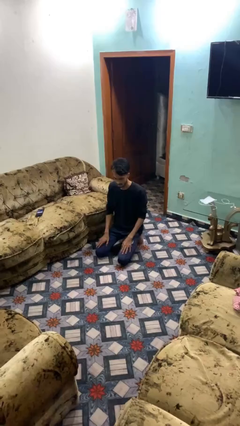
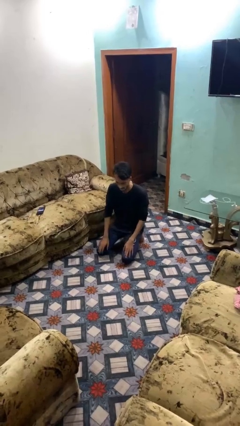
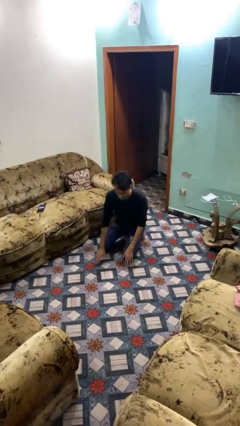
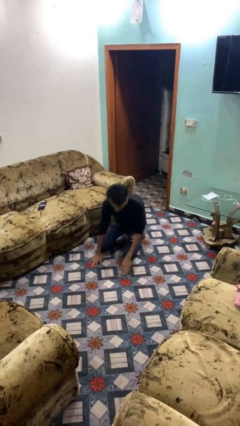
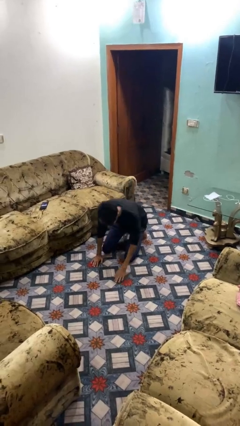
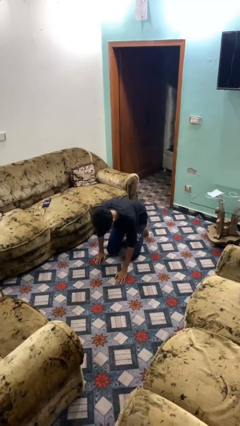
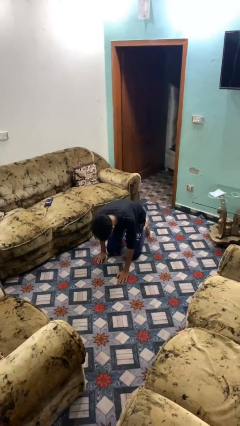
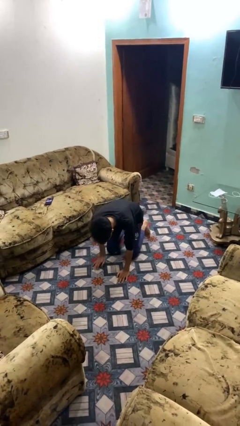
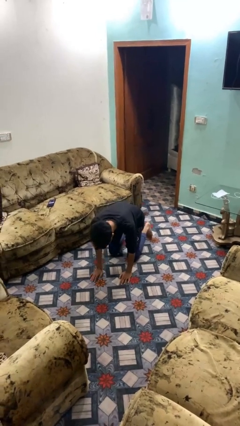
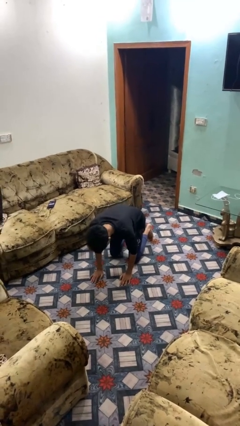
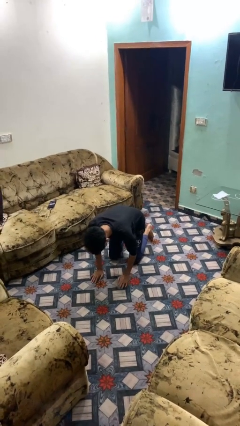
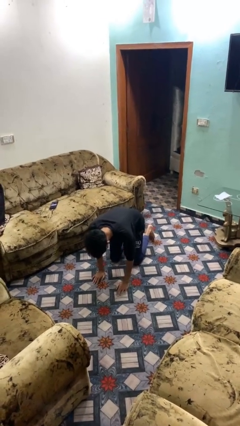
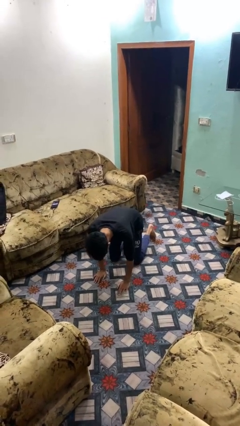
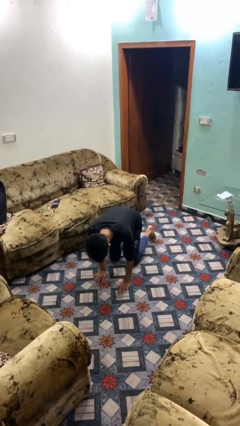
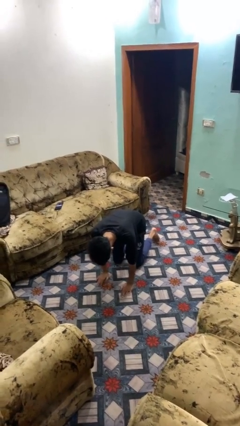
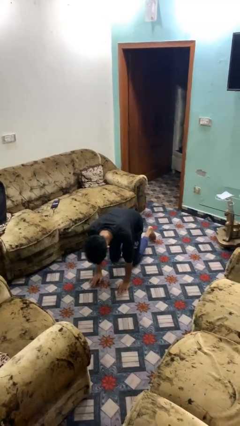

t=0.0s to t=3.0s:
person crawls

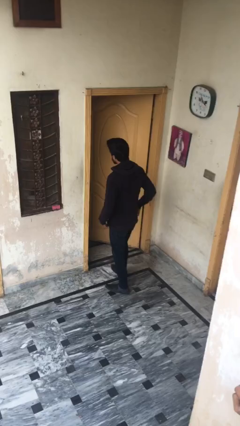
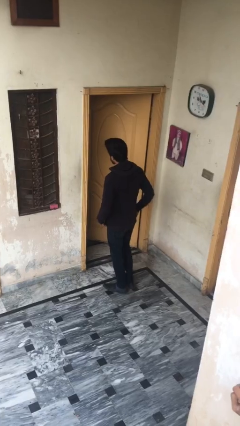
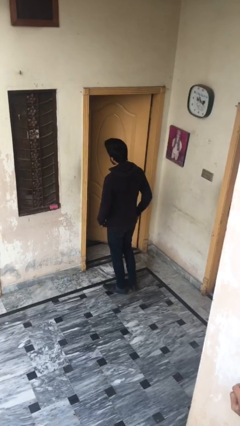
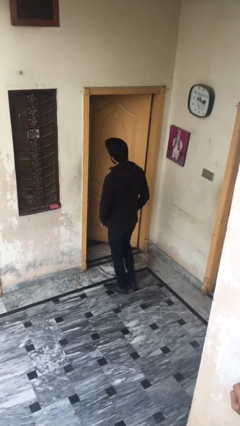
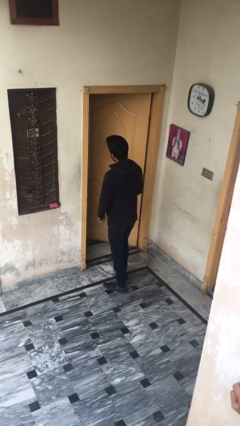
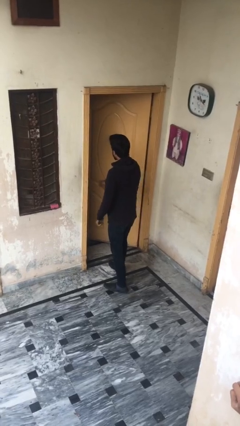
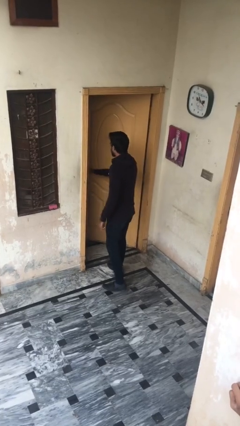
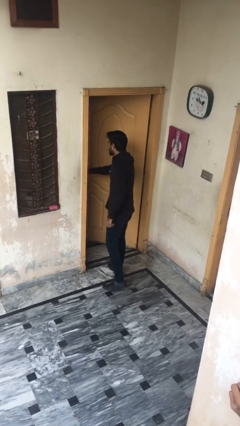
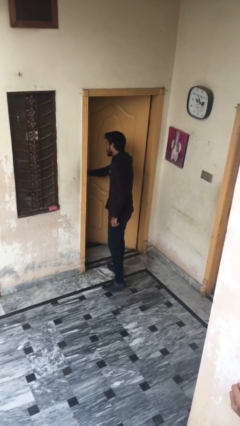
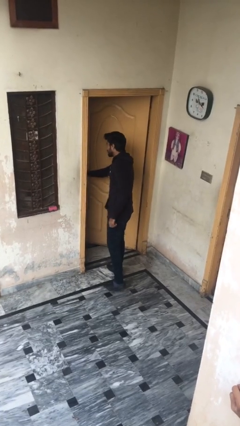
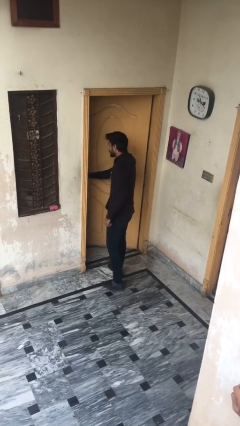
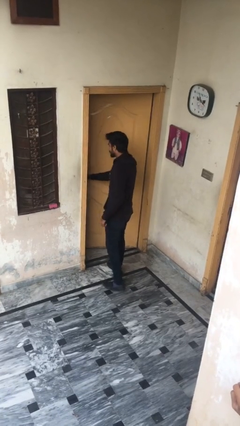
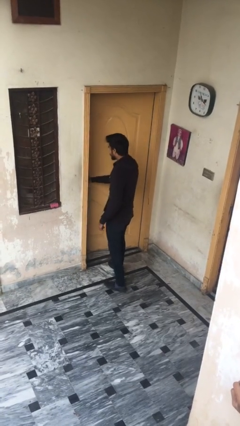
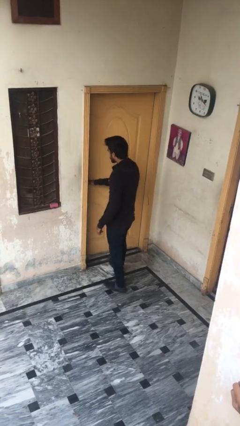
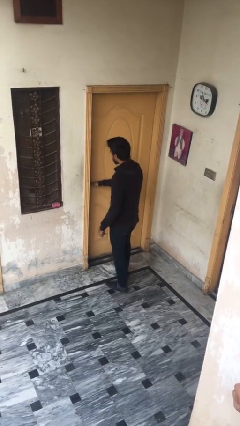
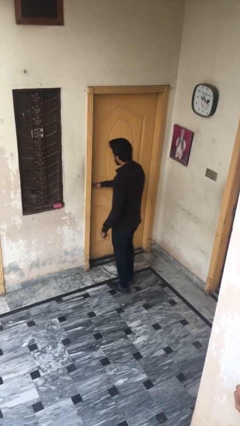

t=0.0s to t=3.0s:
person closes facility door

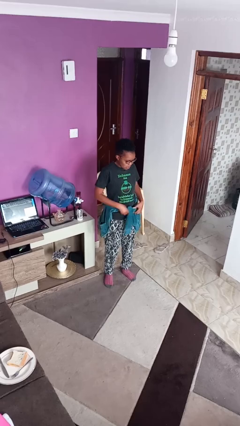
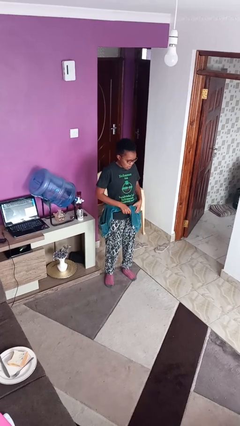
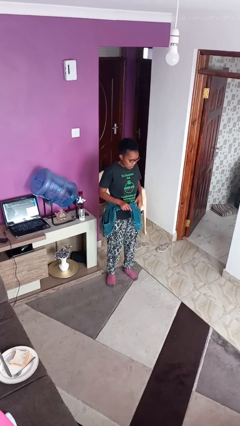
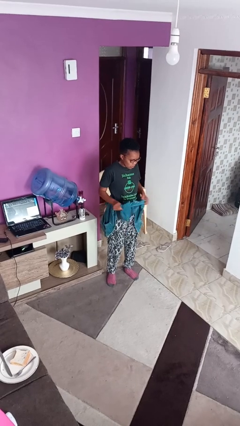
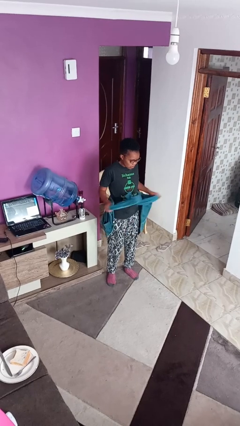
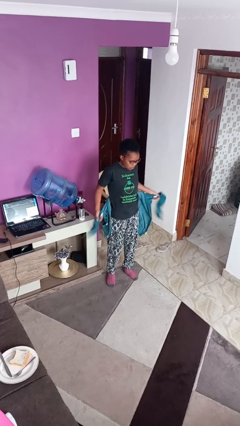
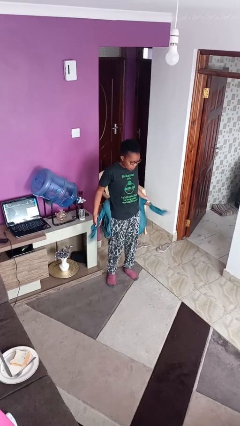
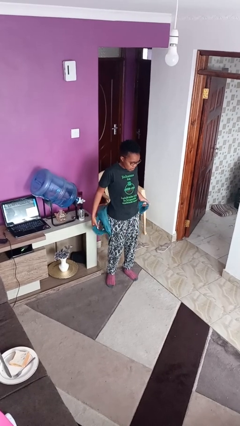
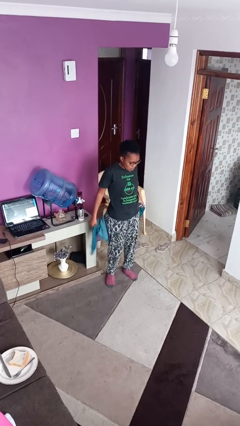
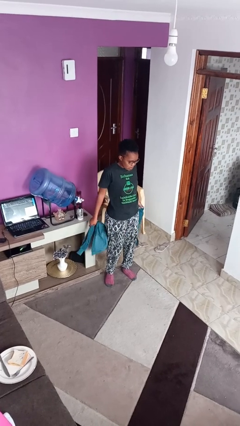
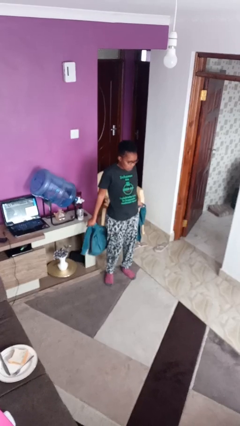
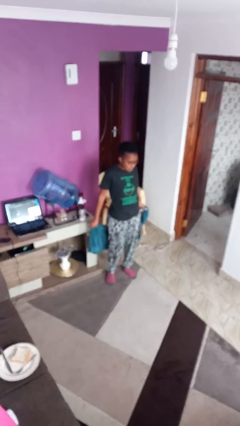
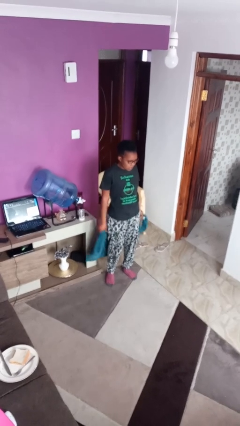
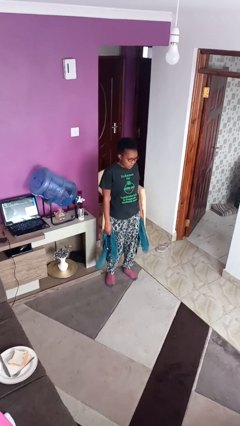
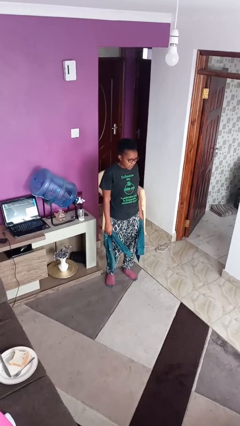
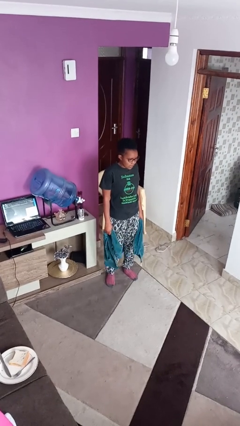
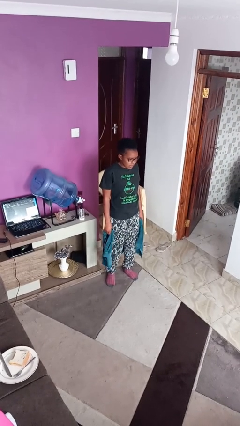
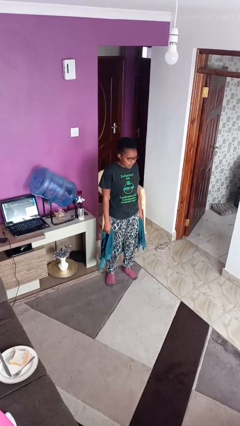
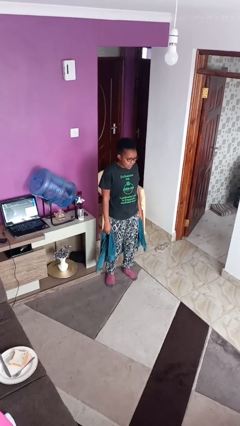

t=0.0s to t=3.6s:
person unties jacket around waist

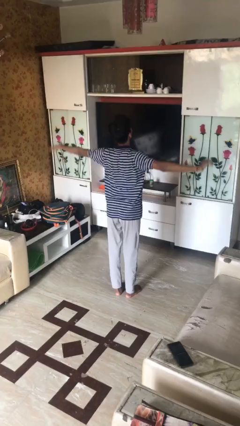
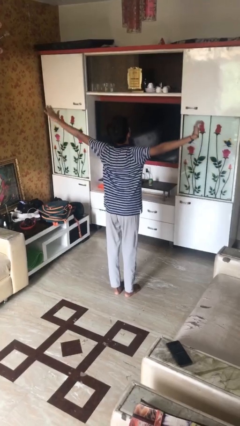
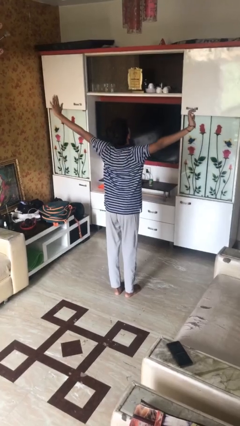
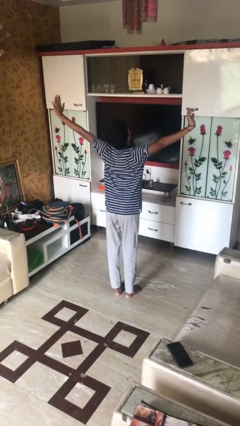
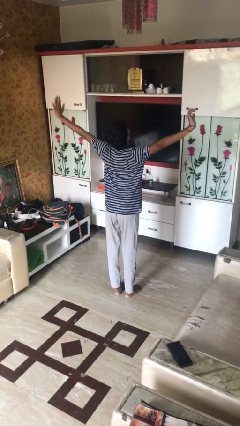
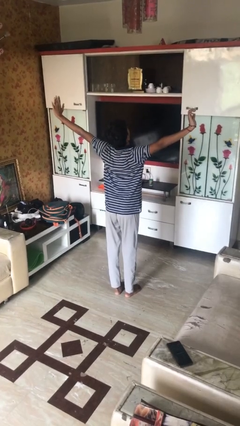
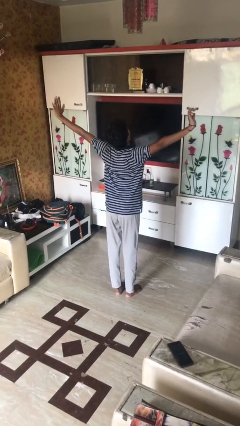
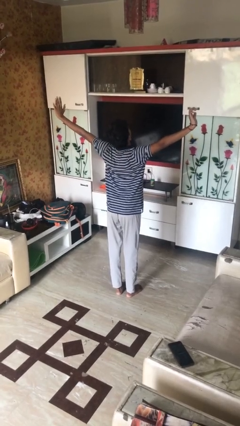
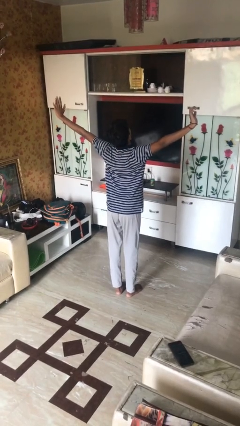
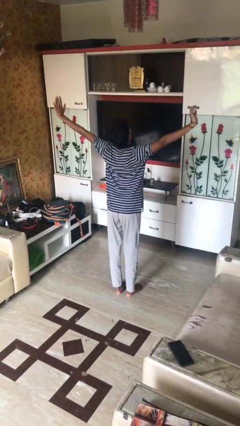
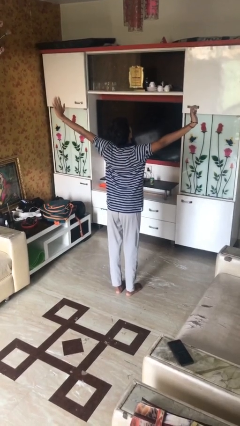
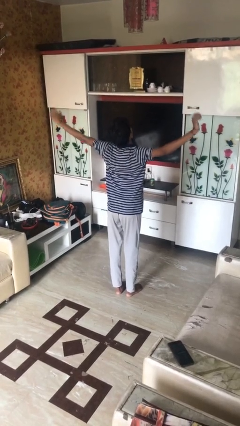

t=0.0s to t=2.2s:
person stretches arms to side

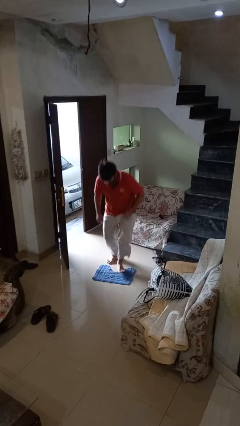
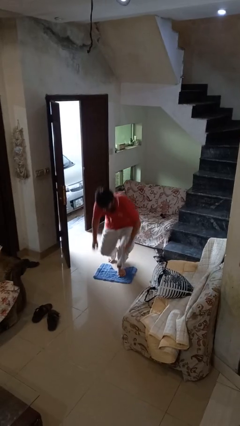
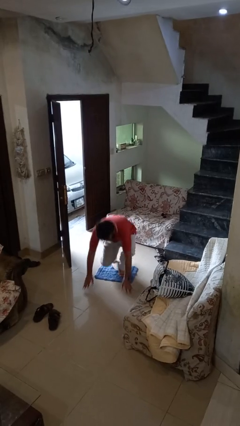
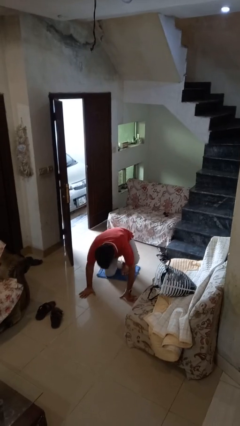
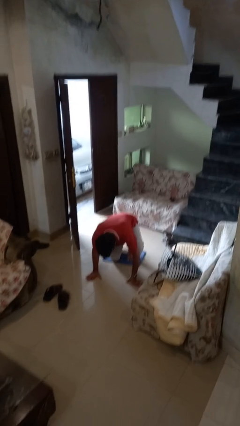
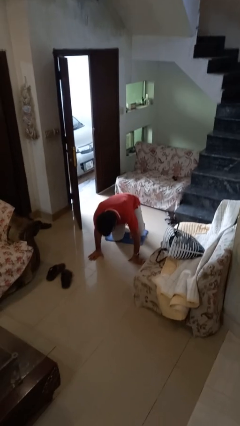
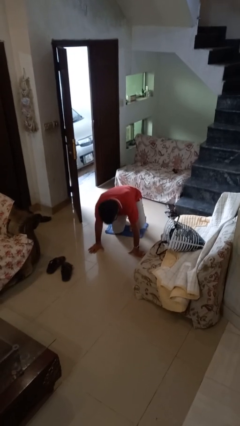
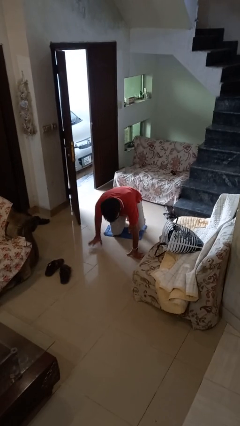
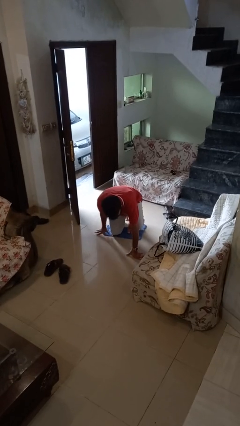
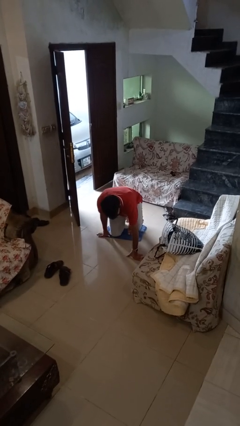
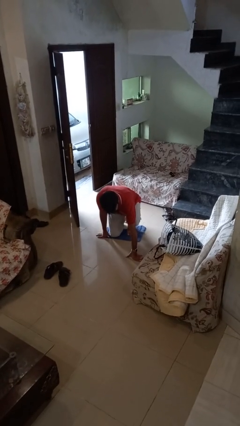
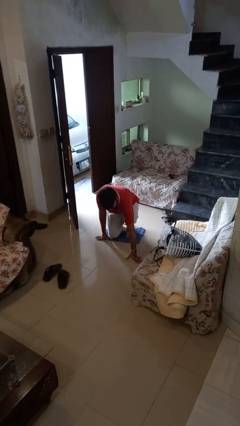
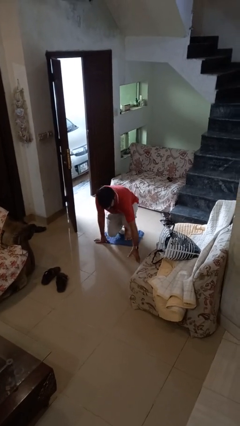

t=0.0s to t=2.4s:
person trips on object on floor

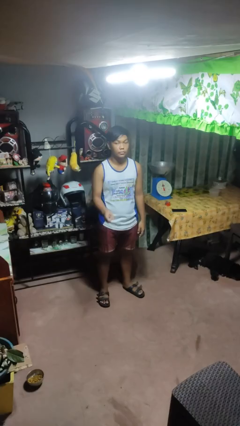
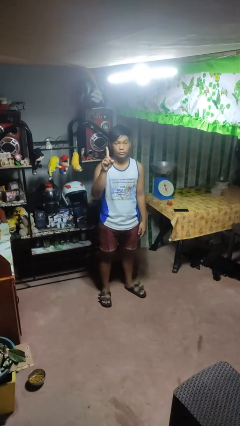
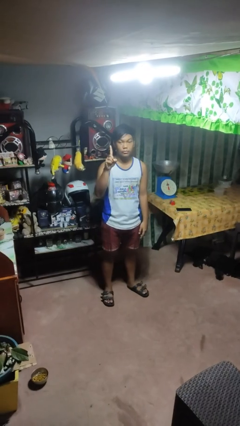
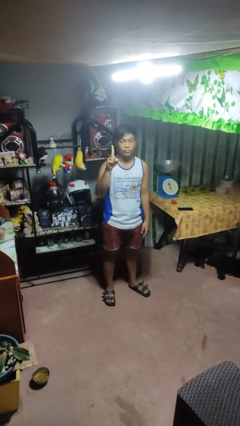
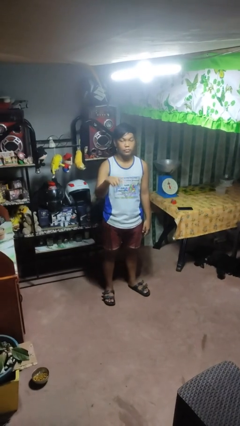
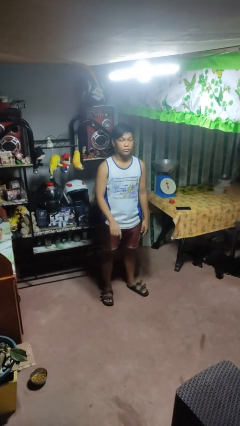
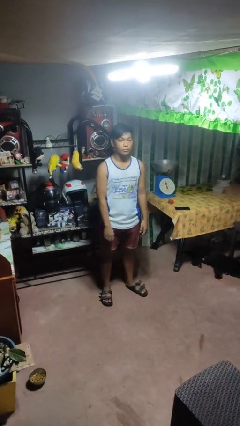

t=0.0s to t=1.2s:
person gestures number one

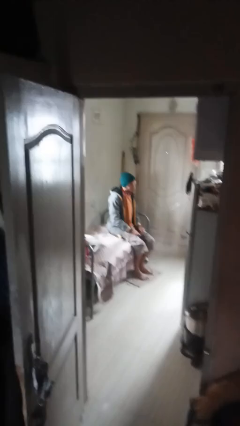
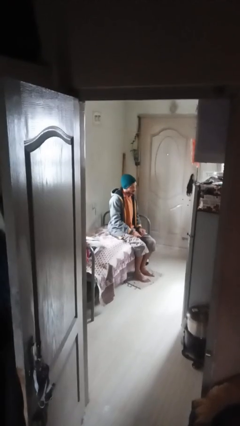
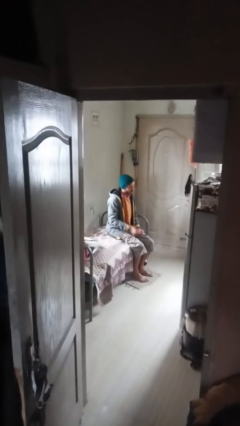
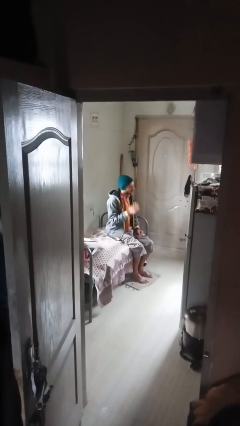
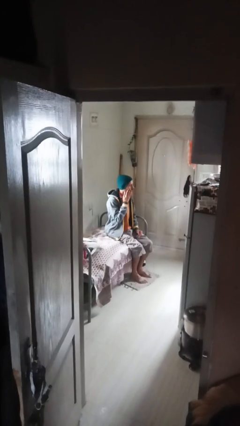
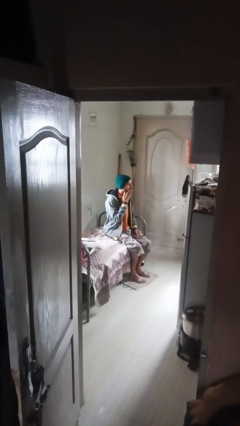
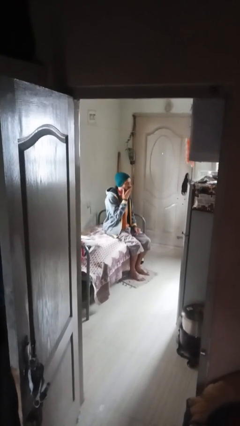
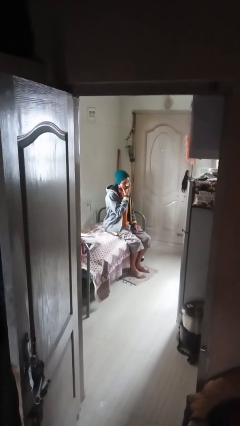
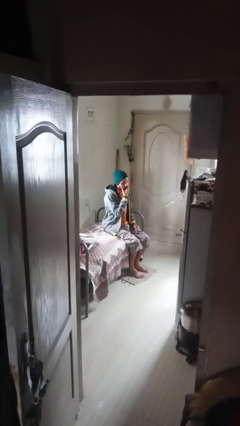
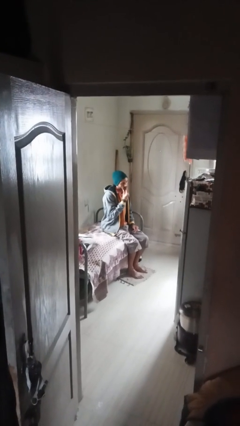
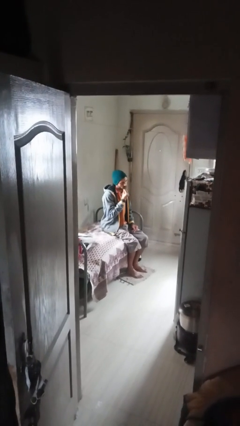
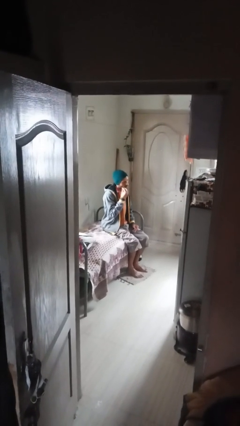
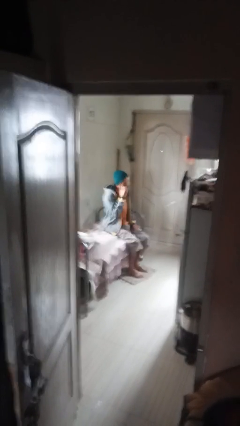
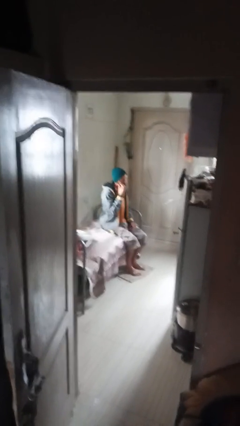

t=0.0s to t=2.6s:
person strokes chin
